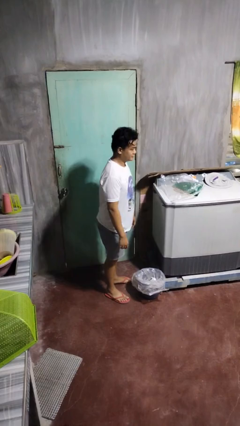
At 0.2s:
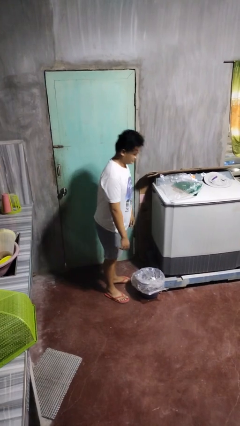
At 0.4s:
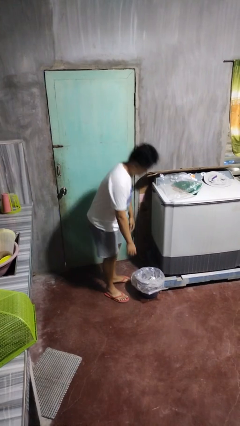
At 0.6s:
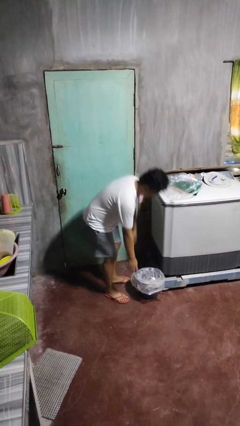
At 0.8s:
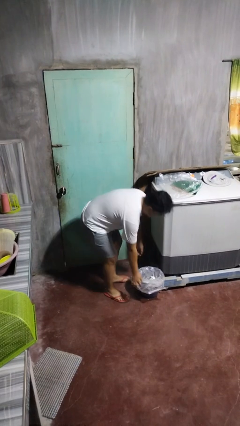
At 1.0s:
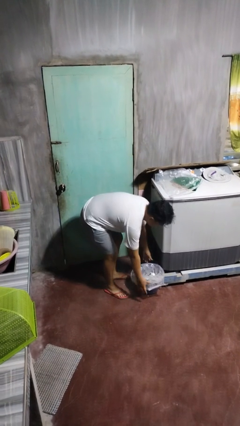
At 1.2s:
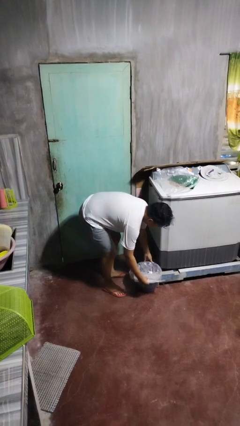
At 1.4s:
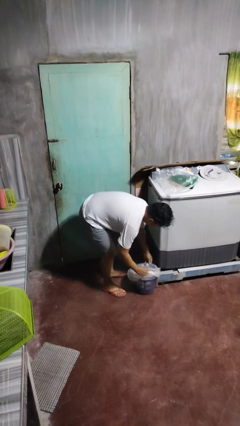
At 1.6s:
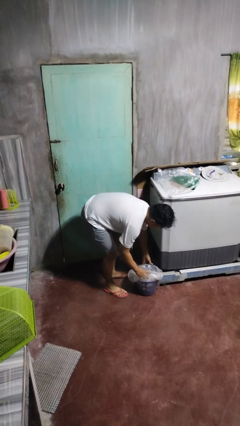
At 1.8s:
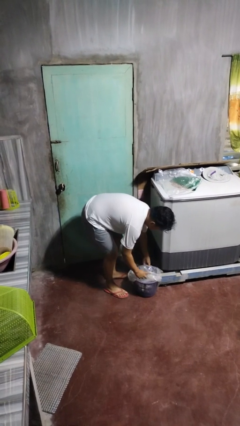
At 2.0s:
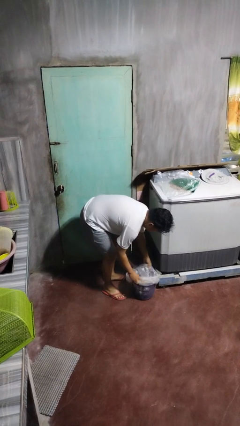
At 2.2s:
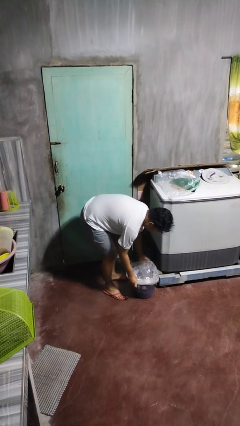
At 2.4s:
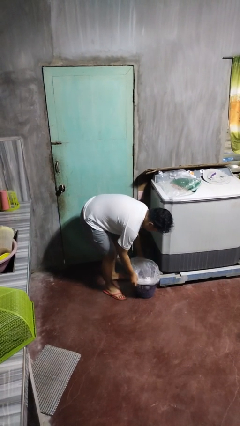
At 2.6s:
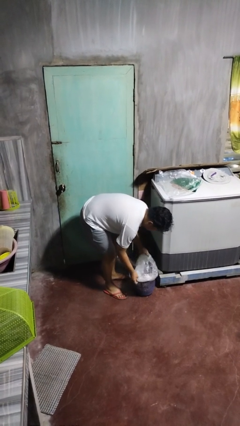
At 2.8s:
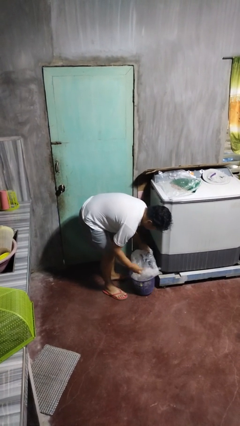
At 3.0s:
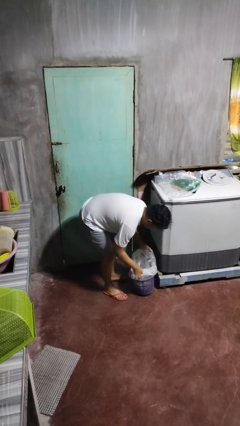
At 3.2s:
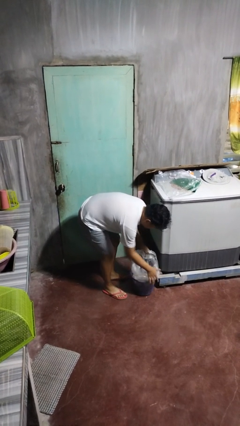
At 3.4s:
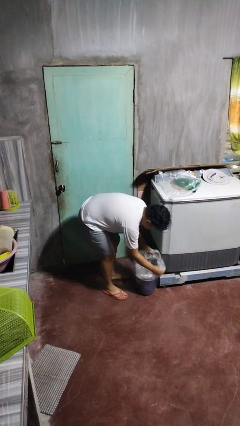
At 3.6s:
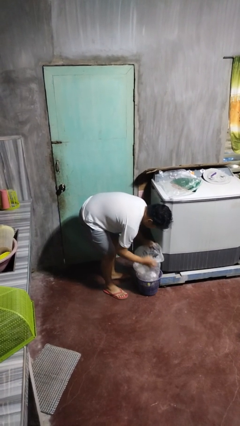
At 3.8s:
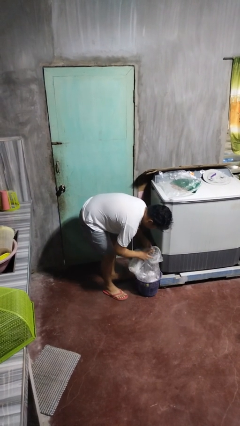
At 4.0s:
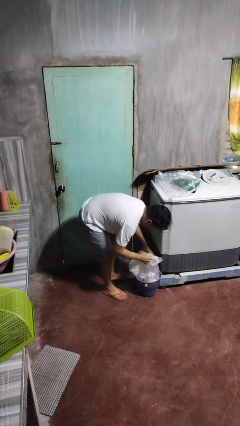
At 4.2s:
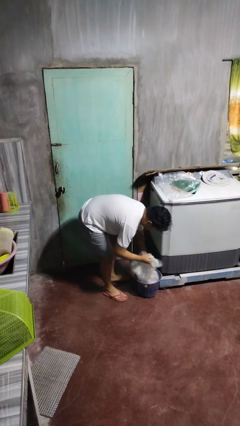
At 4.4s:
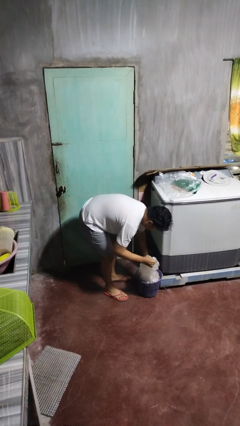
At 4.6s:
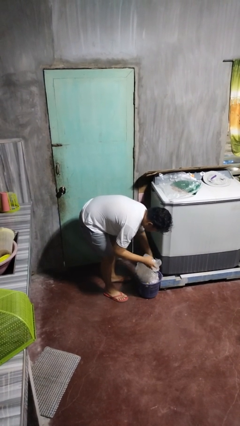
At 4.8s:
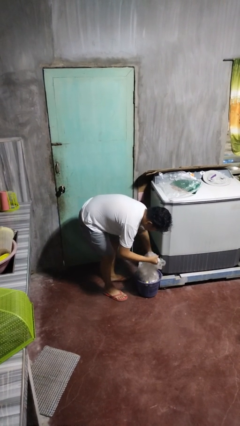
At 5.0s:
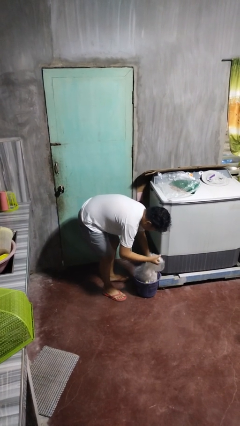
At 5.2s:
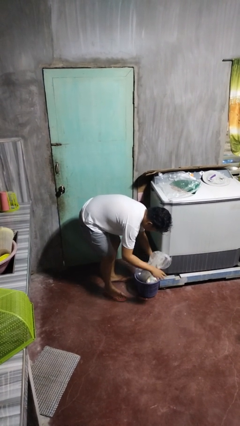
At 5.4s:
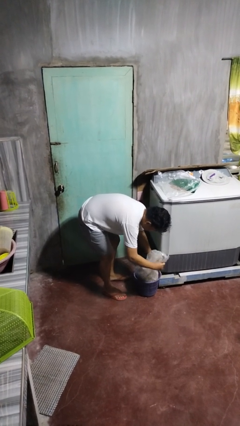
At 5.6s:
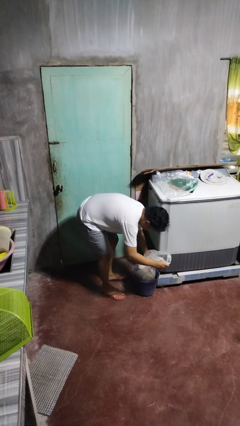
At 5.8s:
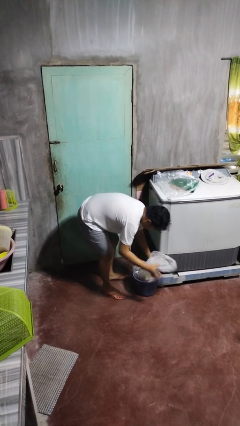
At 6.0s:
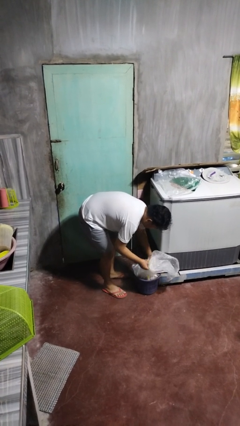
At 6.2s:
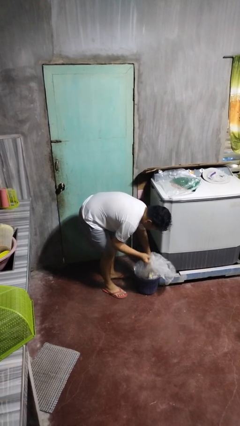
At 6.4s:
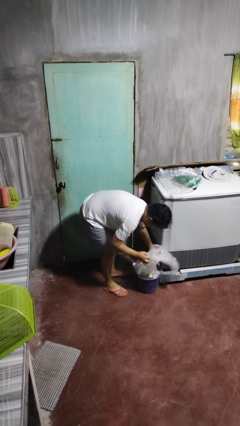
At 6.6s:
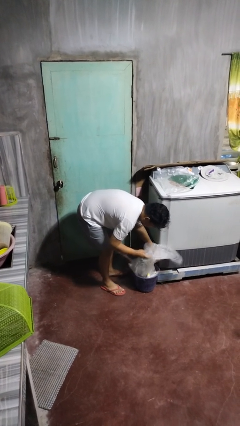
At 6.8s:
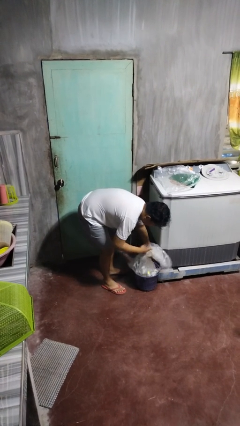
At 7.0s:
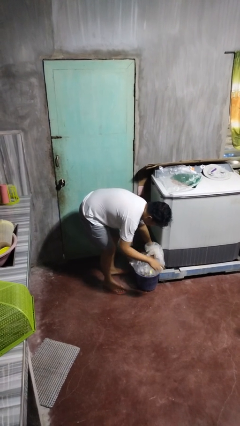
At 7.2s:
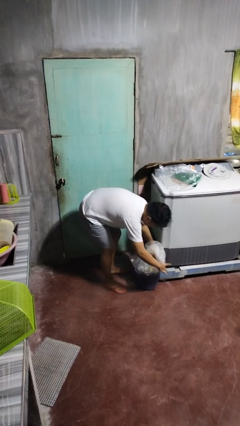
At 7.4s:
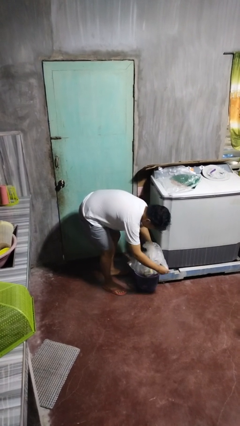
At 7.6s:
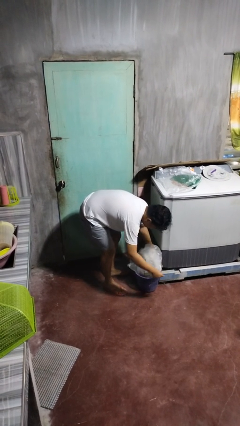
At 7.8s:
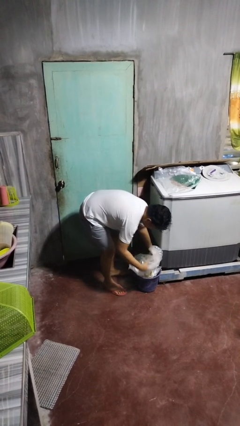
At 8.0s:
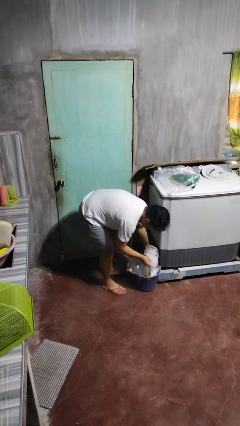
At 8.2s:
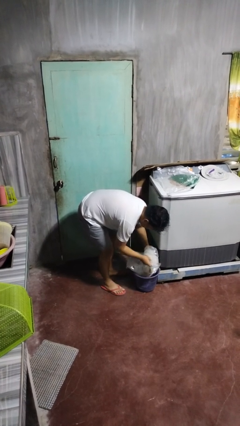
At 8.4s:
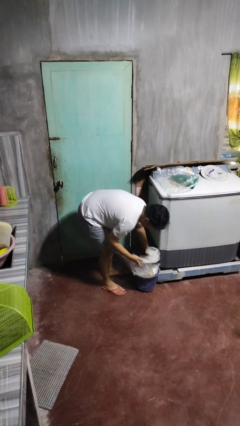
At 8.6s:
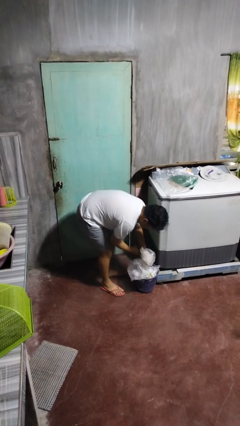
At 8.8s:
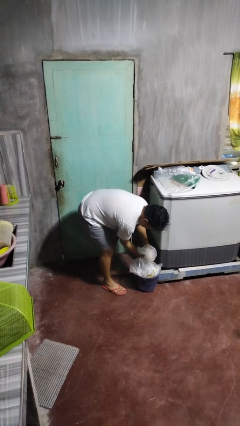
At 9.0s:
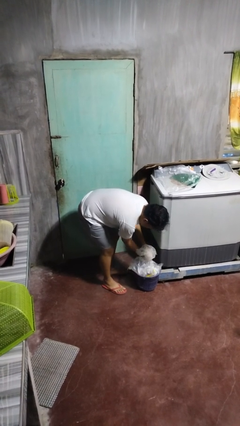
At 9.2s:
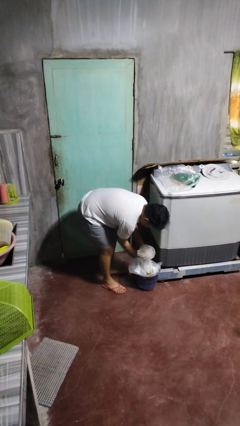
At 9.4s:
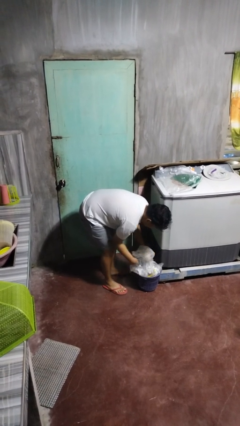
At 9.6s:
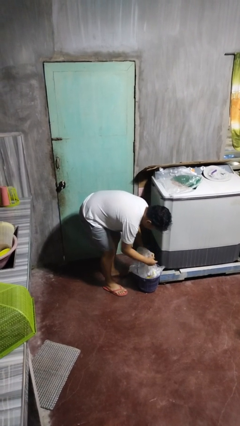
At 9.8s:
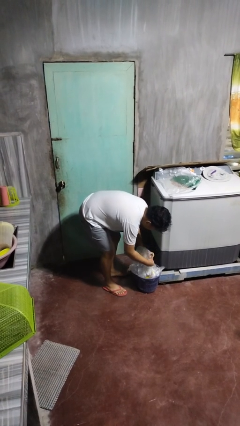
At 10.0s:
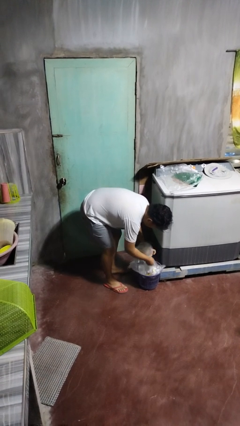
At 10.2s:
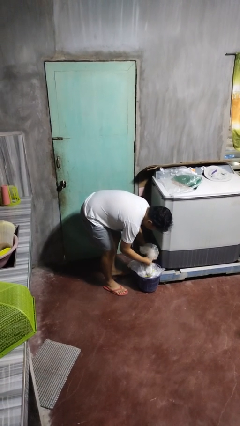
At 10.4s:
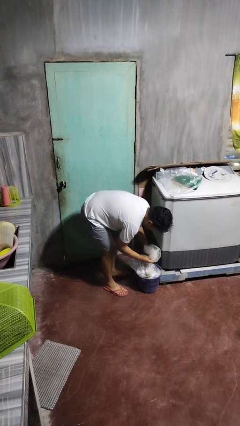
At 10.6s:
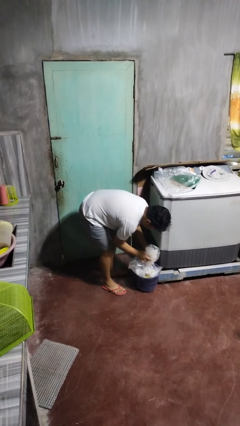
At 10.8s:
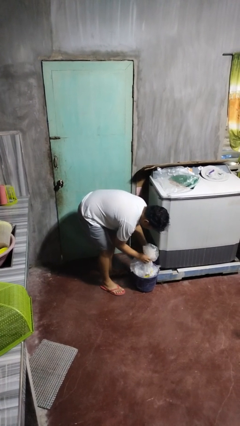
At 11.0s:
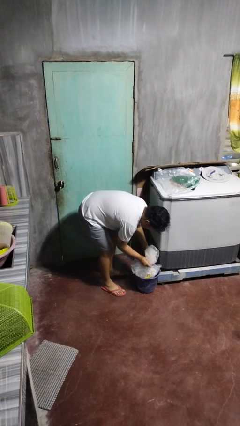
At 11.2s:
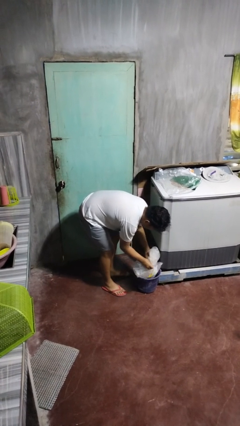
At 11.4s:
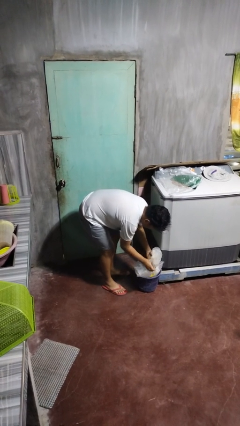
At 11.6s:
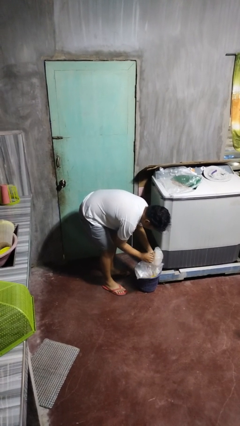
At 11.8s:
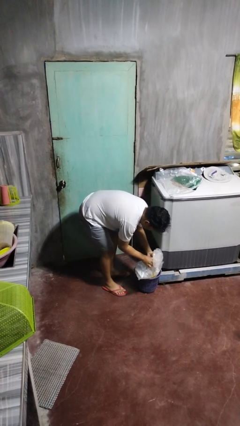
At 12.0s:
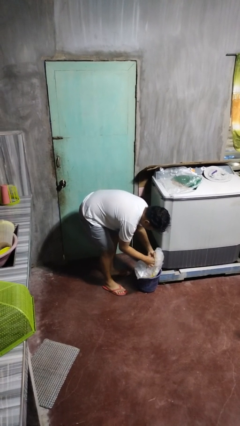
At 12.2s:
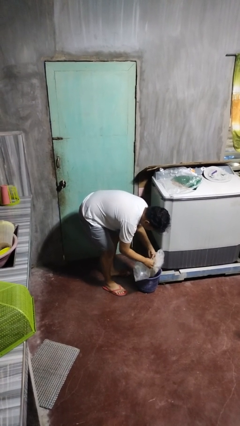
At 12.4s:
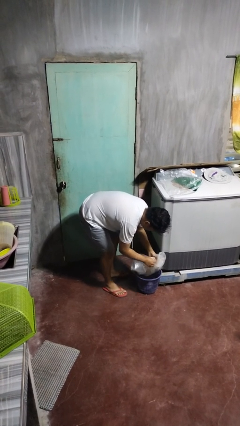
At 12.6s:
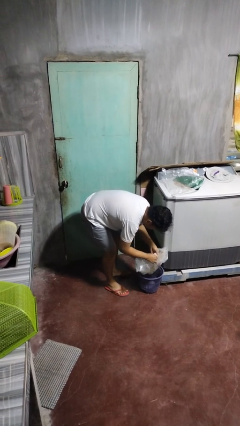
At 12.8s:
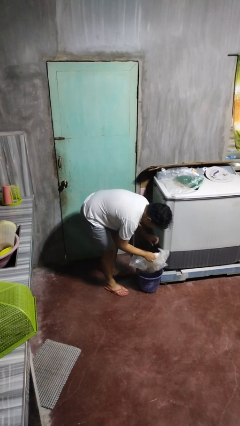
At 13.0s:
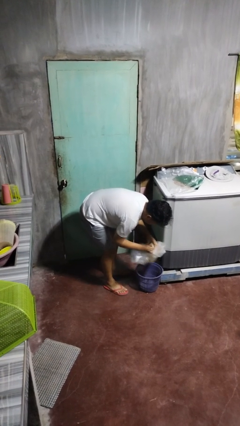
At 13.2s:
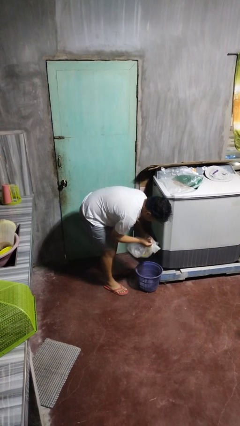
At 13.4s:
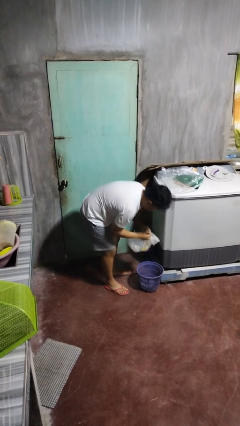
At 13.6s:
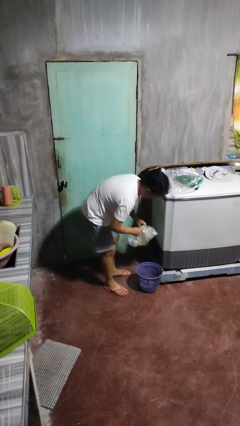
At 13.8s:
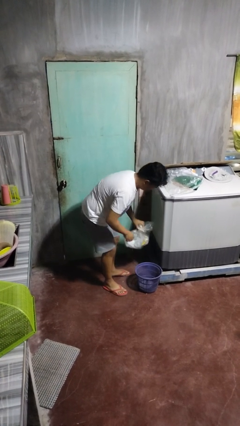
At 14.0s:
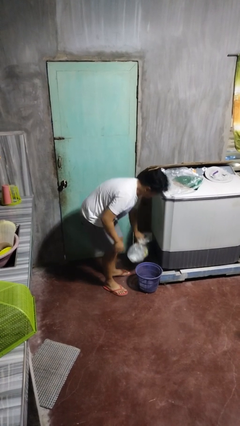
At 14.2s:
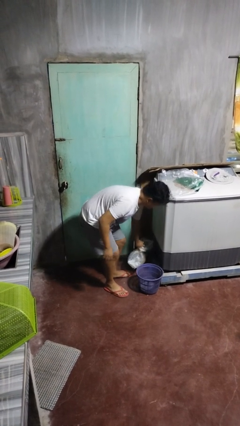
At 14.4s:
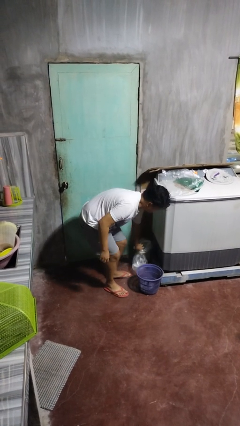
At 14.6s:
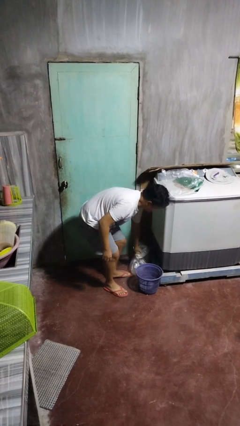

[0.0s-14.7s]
person removes trashbag from trashcan

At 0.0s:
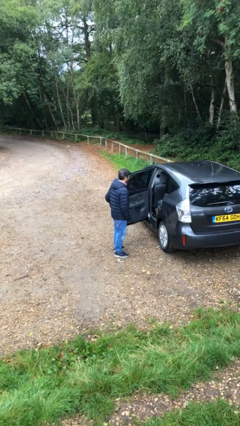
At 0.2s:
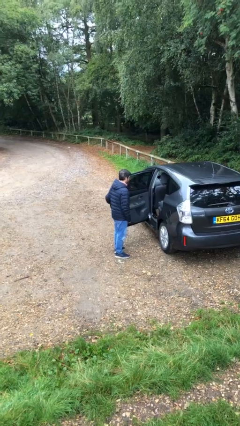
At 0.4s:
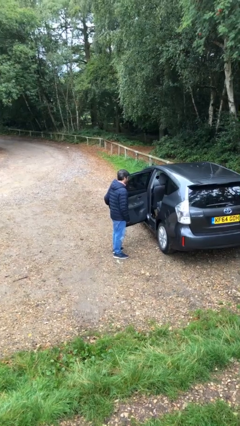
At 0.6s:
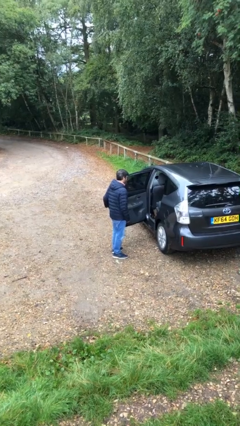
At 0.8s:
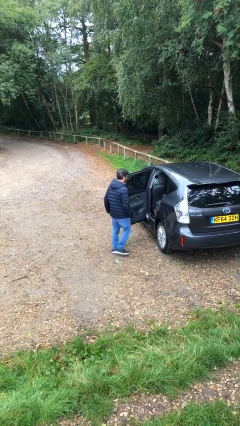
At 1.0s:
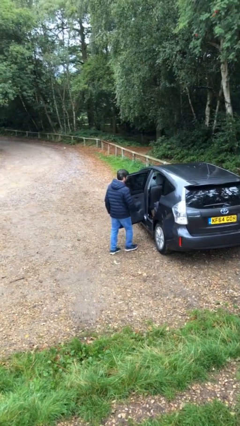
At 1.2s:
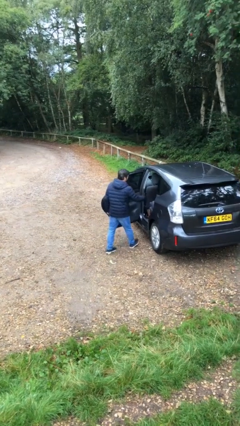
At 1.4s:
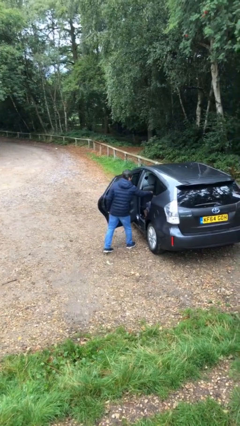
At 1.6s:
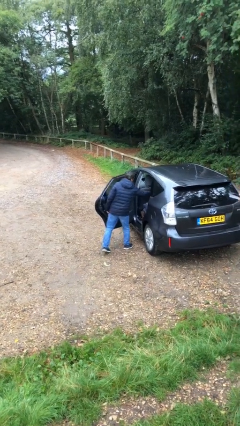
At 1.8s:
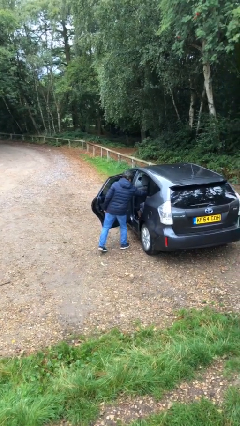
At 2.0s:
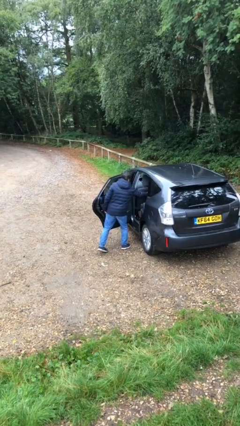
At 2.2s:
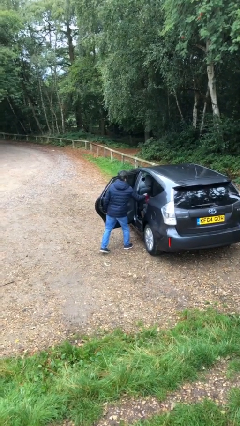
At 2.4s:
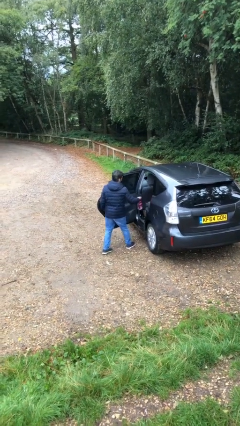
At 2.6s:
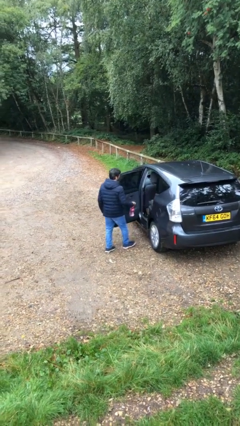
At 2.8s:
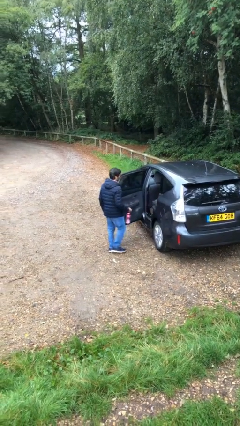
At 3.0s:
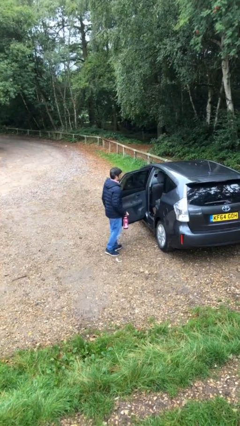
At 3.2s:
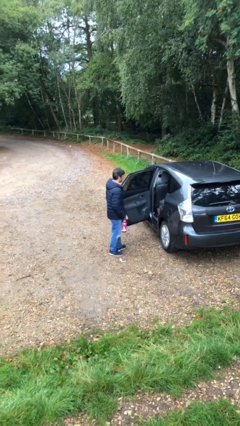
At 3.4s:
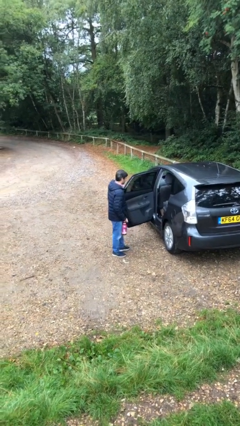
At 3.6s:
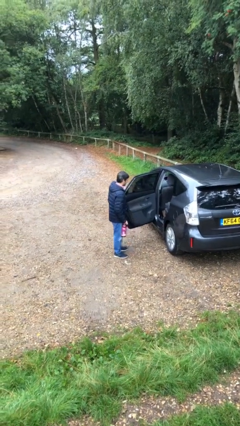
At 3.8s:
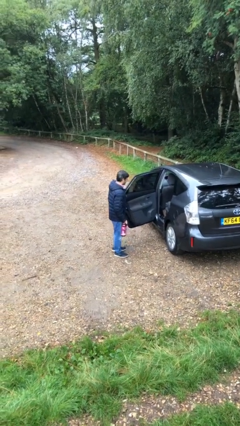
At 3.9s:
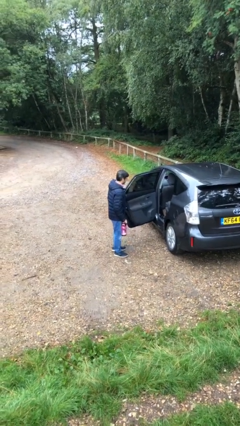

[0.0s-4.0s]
person unloads car
